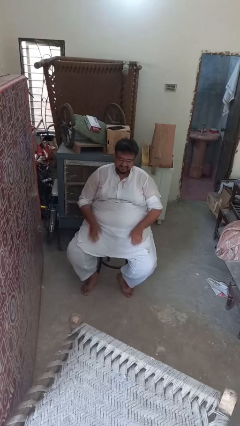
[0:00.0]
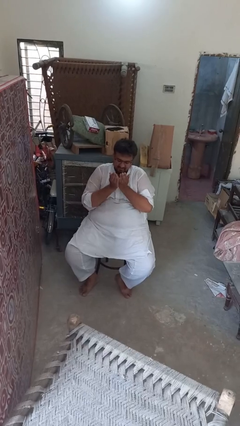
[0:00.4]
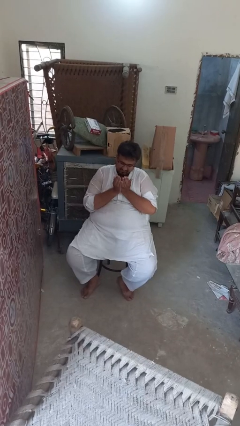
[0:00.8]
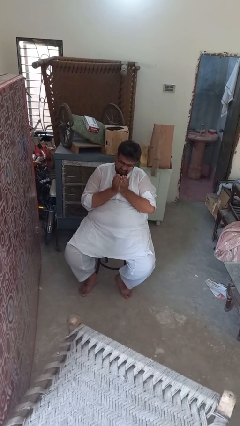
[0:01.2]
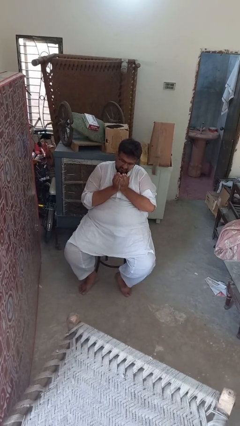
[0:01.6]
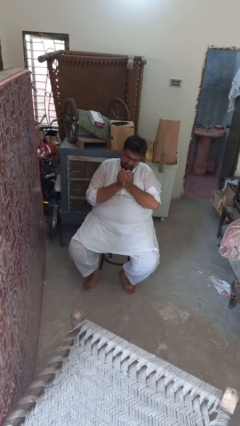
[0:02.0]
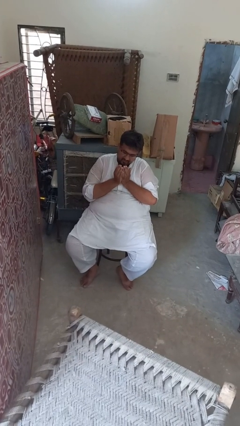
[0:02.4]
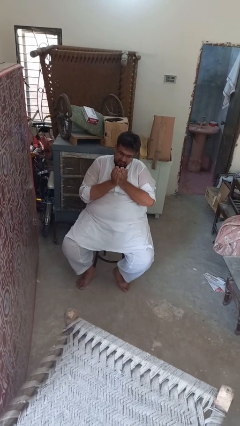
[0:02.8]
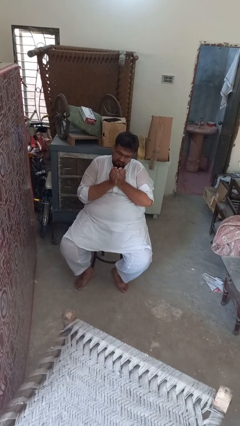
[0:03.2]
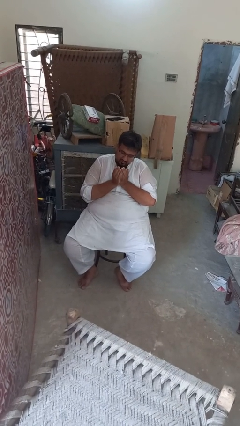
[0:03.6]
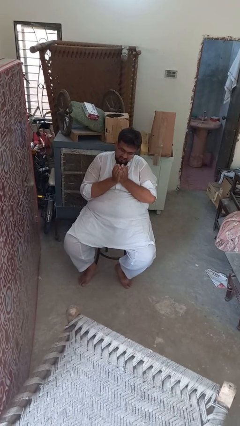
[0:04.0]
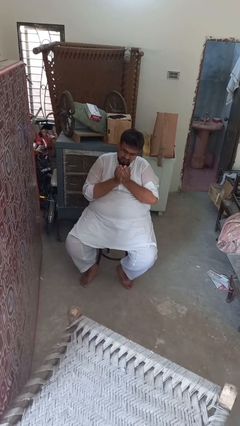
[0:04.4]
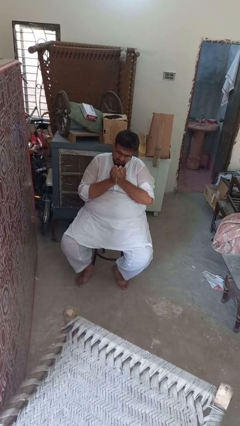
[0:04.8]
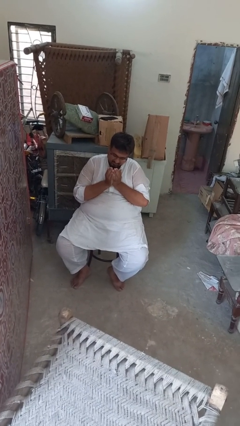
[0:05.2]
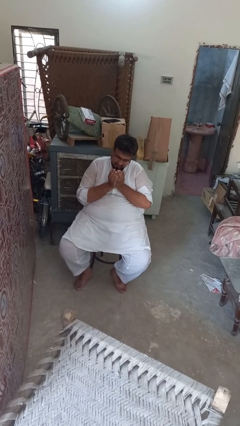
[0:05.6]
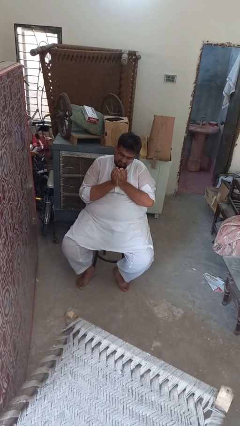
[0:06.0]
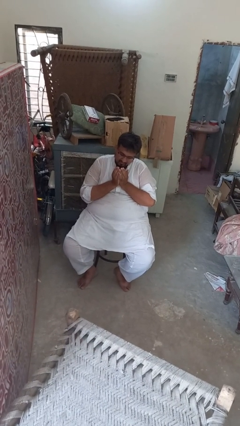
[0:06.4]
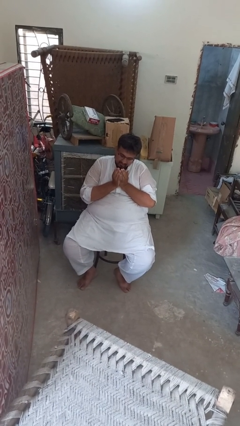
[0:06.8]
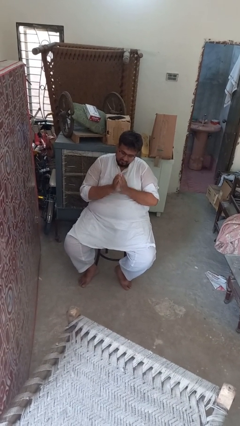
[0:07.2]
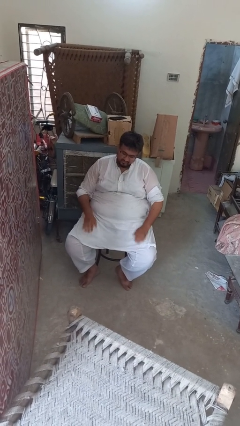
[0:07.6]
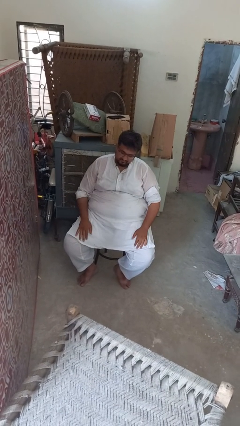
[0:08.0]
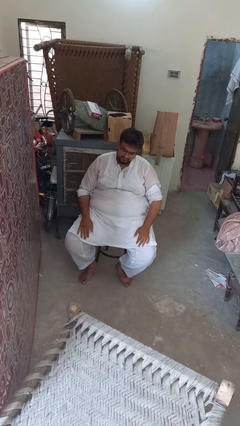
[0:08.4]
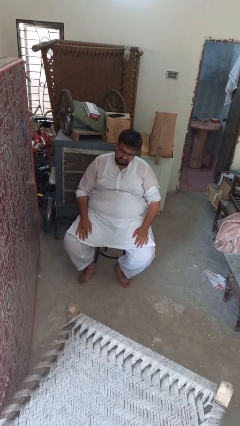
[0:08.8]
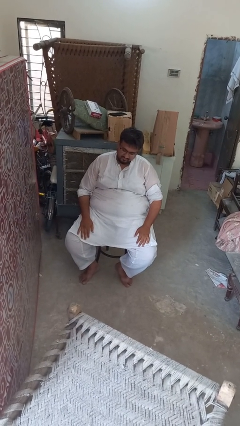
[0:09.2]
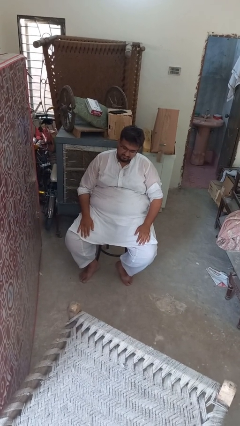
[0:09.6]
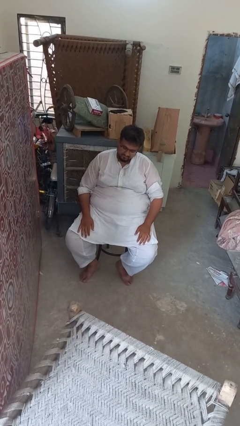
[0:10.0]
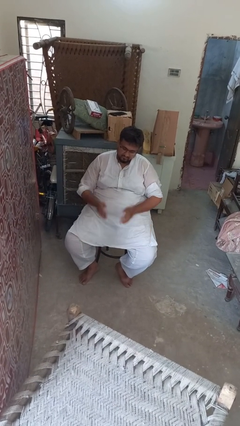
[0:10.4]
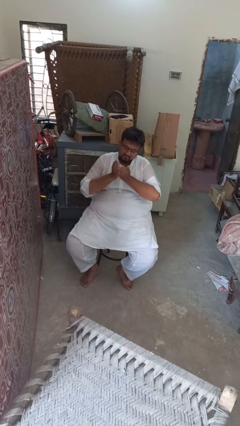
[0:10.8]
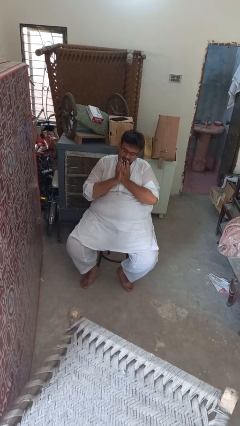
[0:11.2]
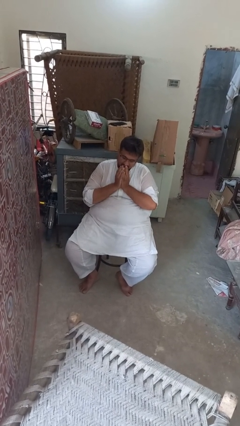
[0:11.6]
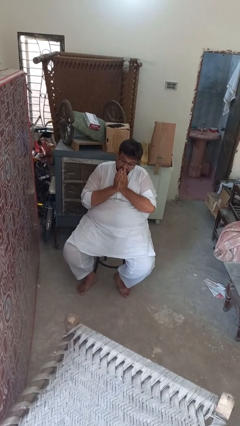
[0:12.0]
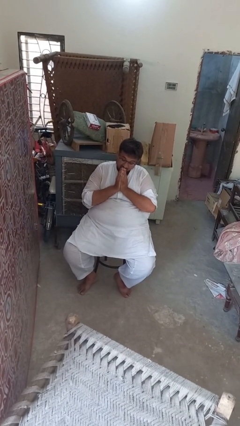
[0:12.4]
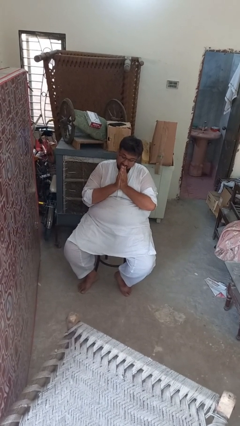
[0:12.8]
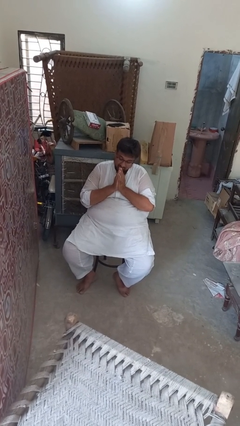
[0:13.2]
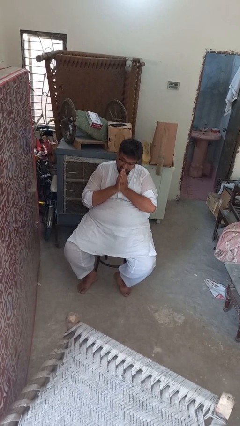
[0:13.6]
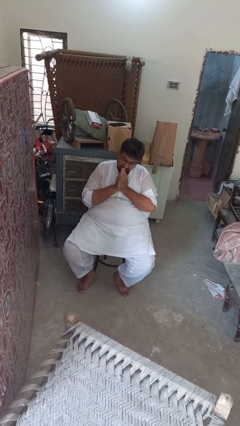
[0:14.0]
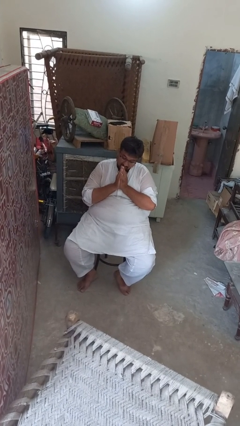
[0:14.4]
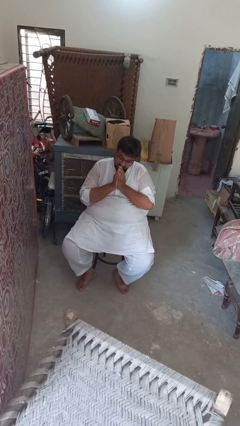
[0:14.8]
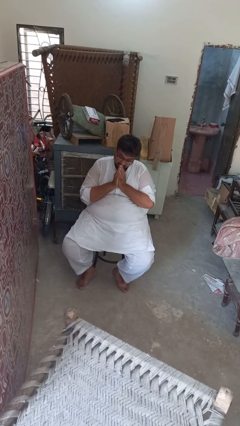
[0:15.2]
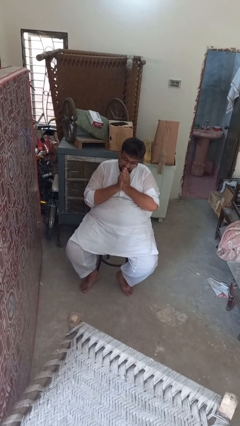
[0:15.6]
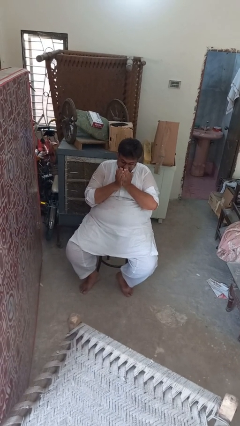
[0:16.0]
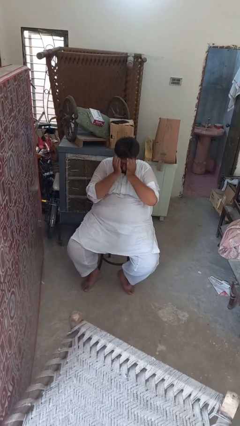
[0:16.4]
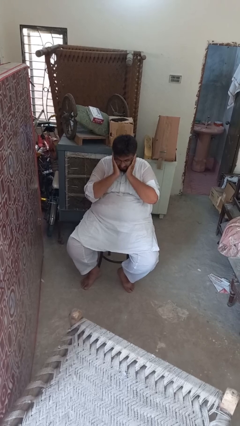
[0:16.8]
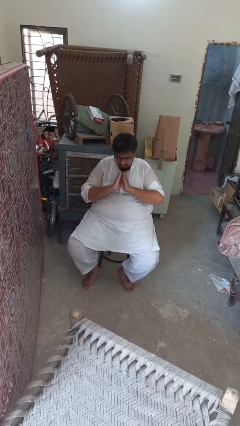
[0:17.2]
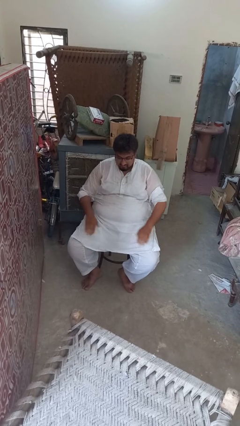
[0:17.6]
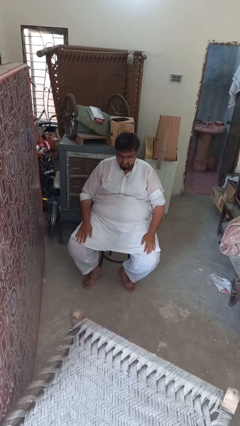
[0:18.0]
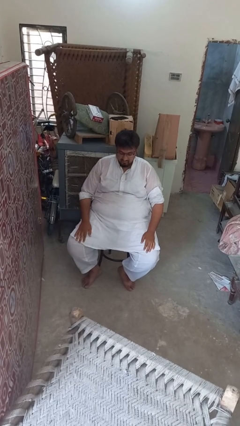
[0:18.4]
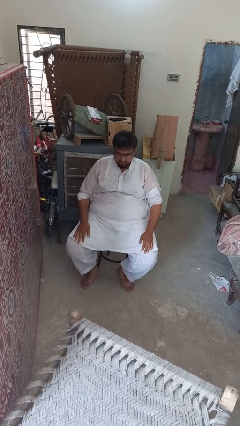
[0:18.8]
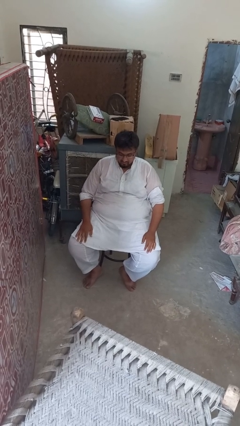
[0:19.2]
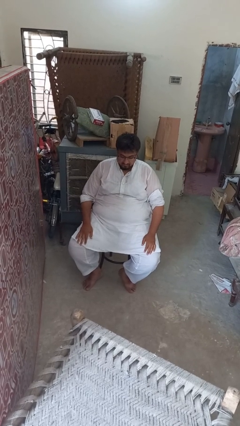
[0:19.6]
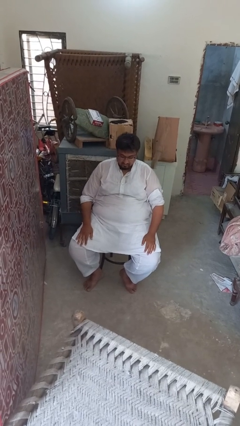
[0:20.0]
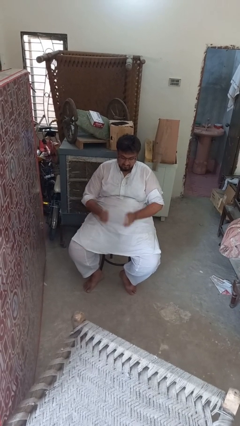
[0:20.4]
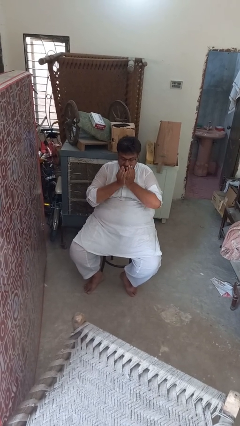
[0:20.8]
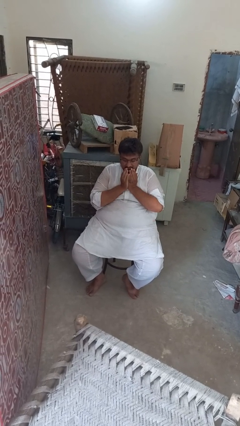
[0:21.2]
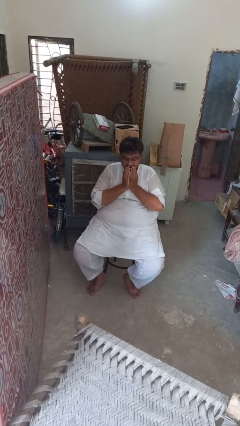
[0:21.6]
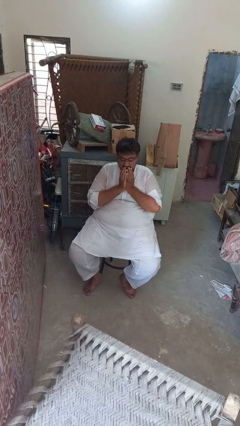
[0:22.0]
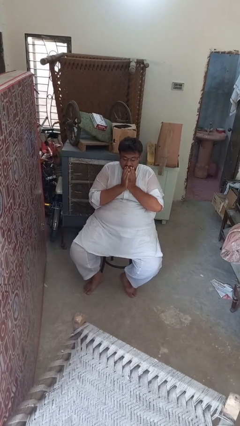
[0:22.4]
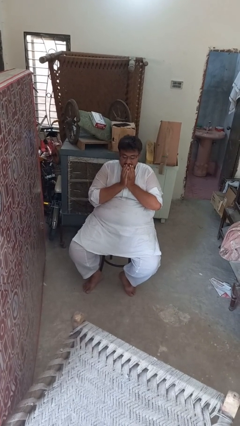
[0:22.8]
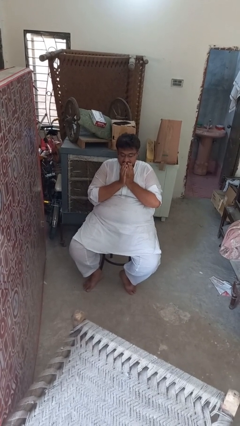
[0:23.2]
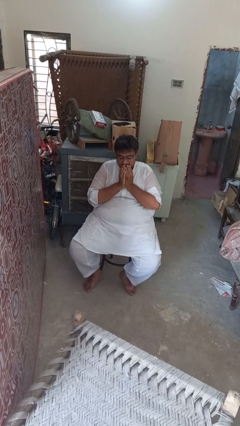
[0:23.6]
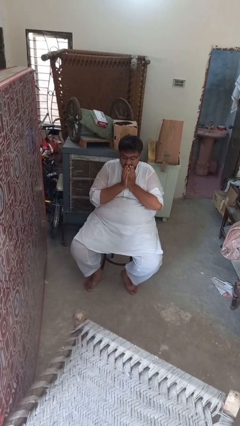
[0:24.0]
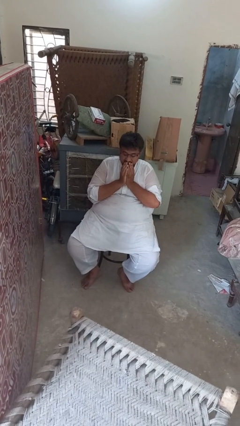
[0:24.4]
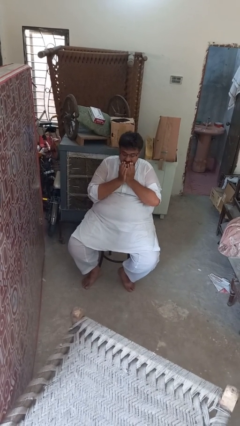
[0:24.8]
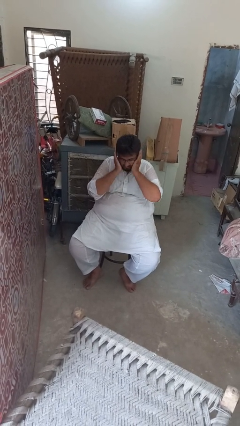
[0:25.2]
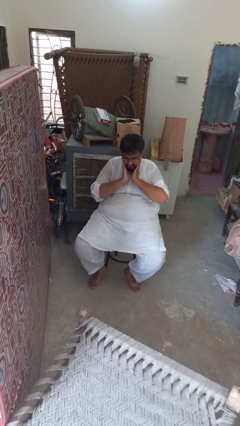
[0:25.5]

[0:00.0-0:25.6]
person prays

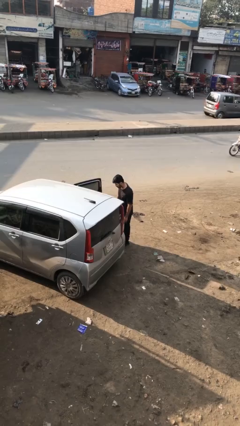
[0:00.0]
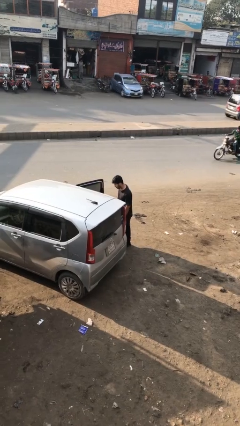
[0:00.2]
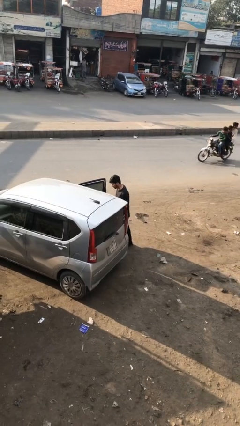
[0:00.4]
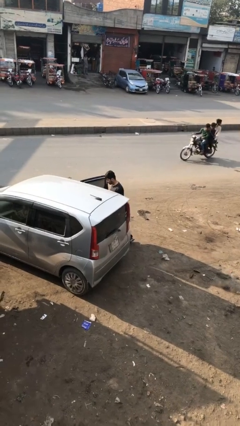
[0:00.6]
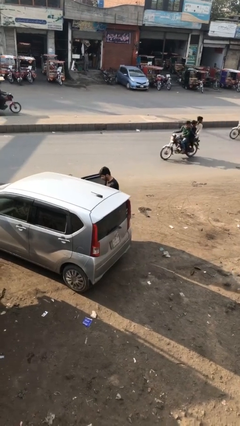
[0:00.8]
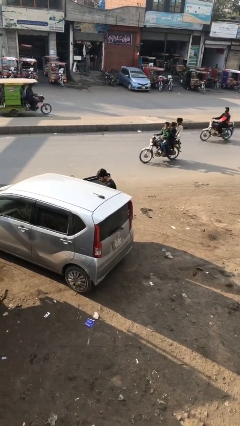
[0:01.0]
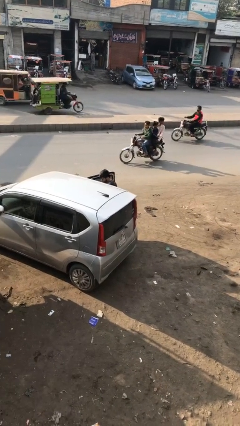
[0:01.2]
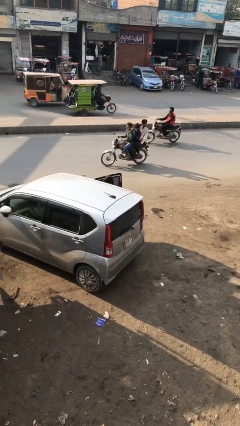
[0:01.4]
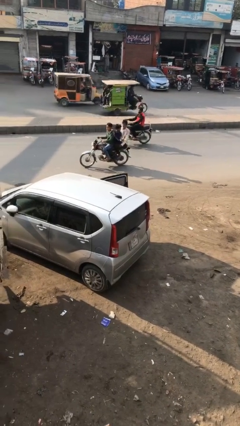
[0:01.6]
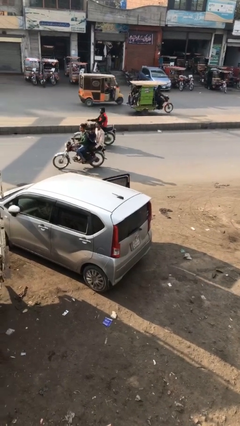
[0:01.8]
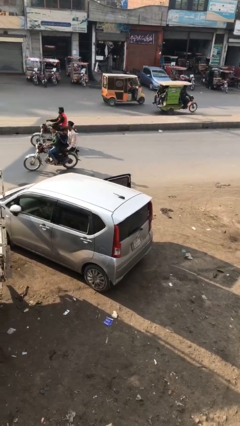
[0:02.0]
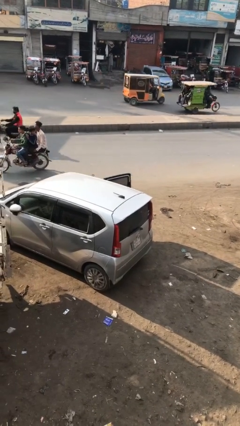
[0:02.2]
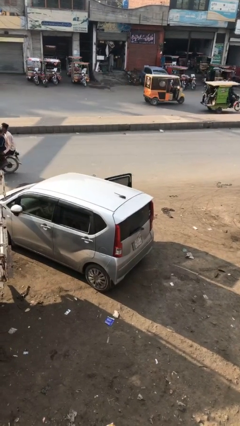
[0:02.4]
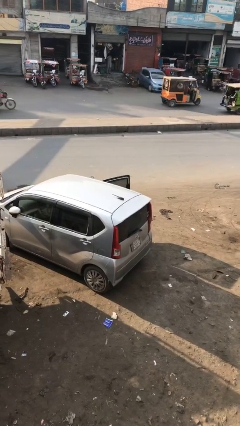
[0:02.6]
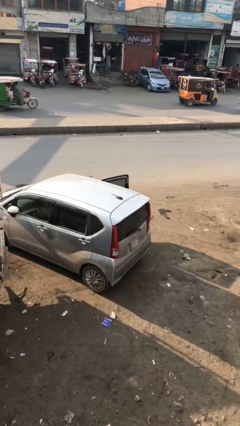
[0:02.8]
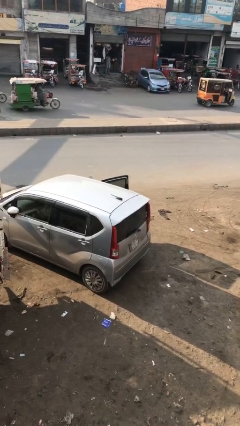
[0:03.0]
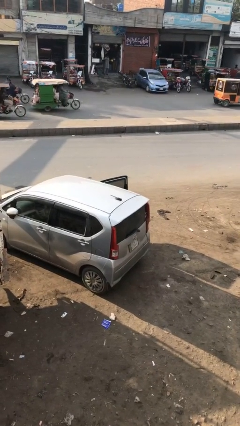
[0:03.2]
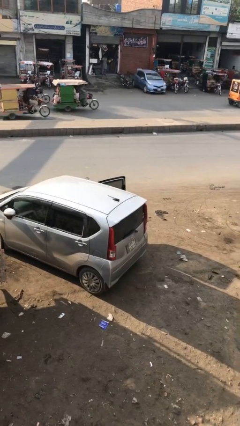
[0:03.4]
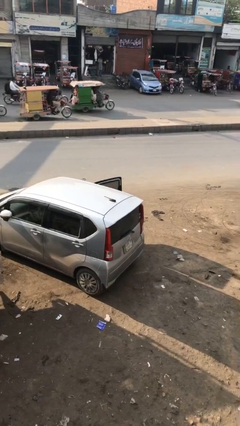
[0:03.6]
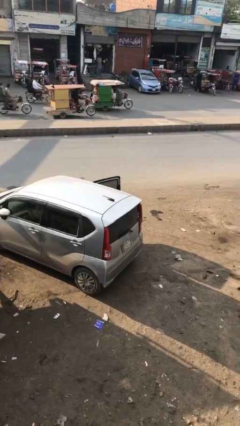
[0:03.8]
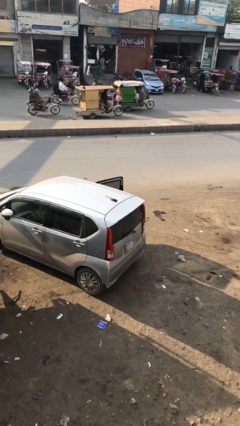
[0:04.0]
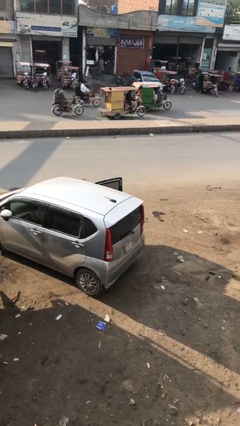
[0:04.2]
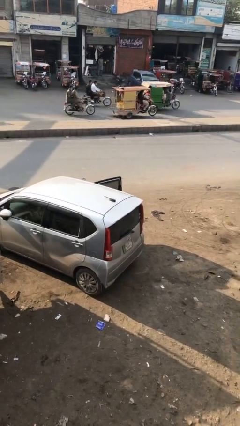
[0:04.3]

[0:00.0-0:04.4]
person enters car

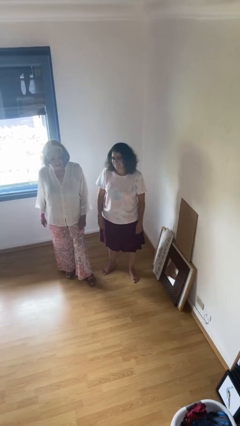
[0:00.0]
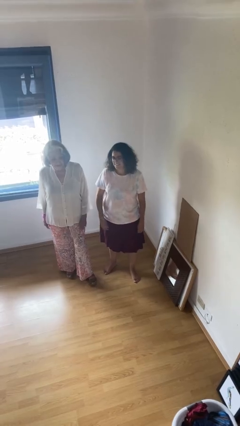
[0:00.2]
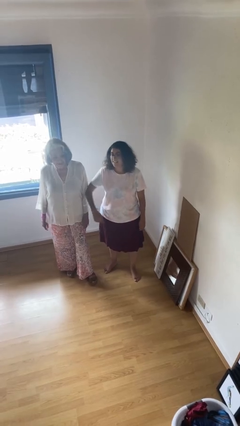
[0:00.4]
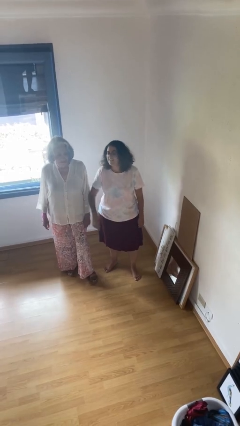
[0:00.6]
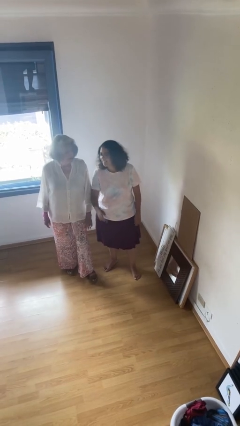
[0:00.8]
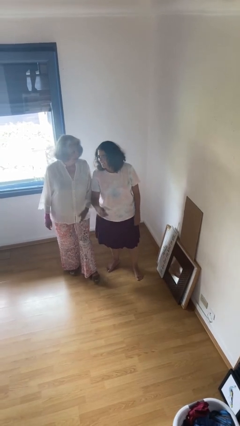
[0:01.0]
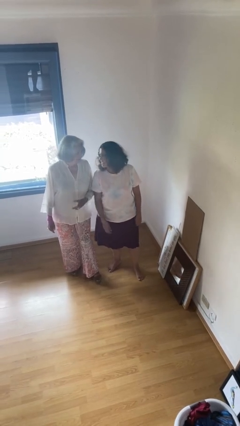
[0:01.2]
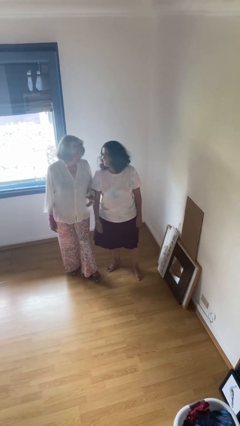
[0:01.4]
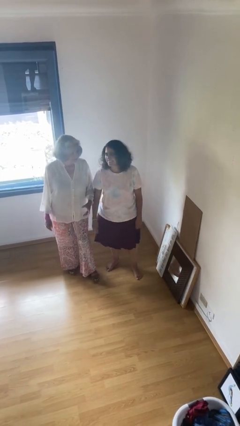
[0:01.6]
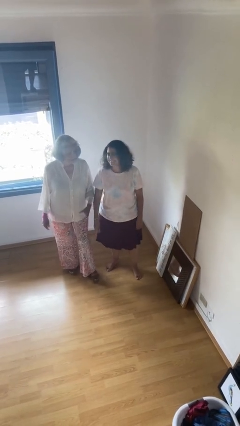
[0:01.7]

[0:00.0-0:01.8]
person nudges person with elbow
